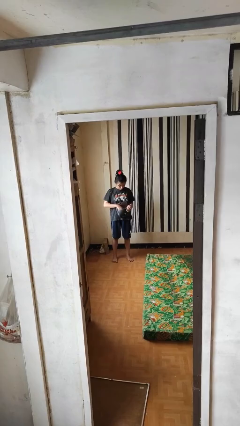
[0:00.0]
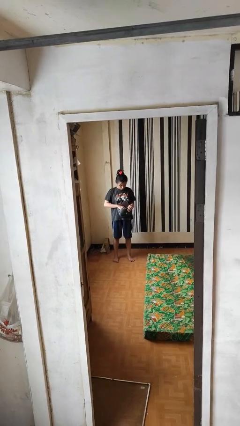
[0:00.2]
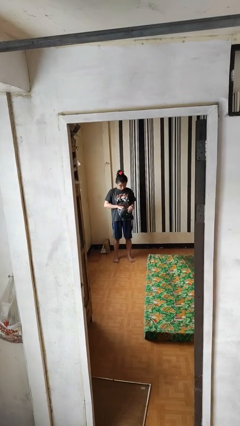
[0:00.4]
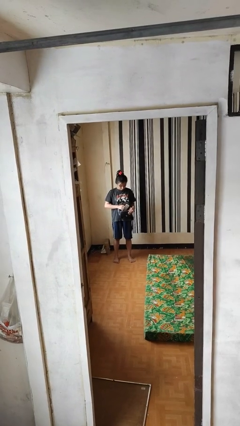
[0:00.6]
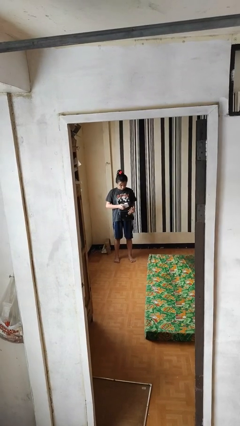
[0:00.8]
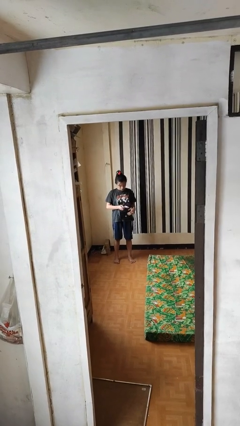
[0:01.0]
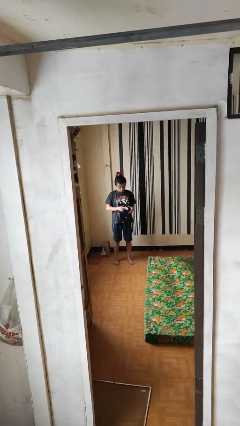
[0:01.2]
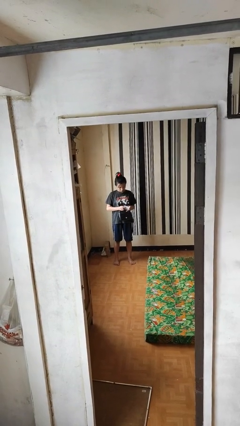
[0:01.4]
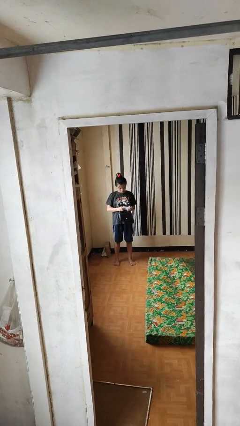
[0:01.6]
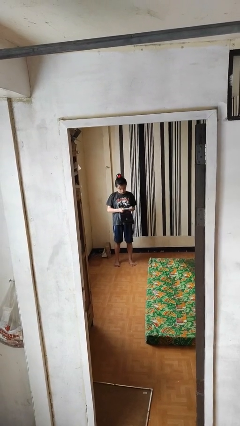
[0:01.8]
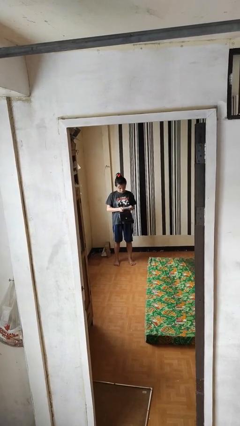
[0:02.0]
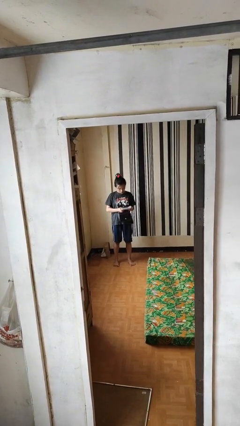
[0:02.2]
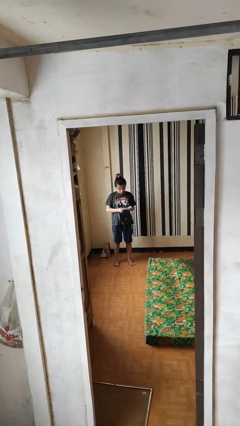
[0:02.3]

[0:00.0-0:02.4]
person takes object from purse

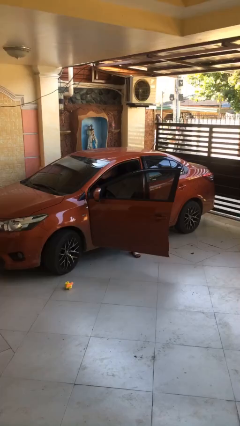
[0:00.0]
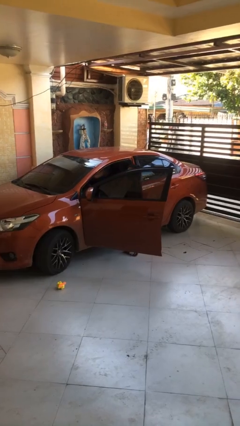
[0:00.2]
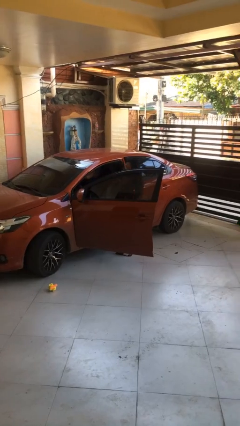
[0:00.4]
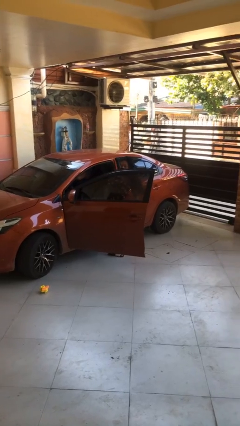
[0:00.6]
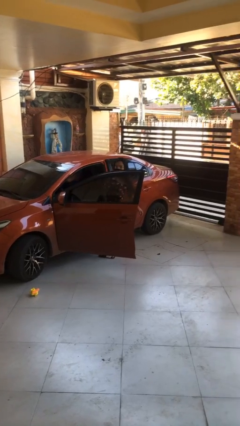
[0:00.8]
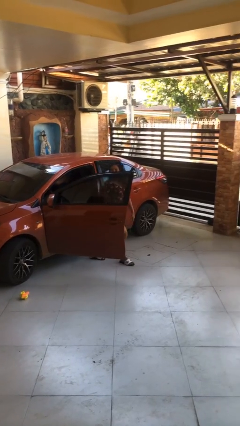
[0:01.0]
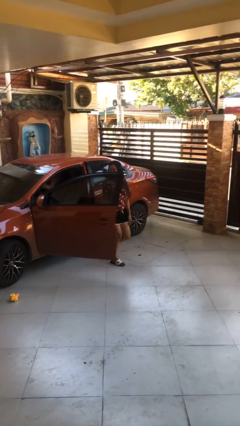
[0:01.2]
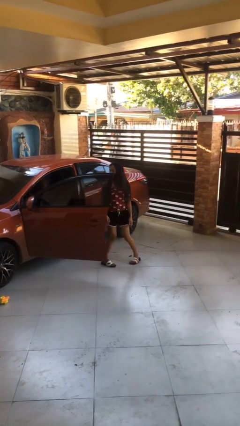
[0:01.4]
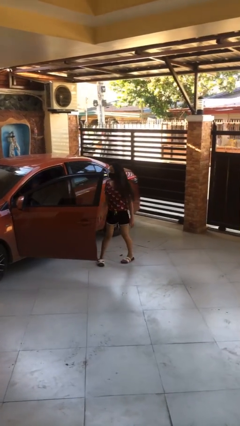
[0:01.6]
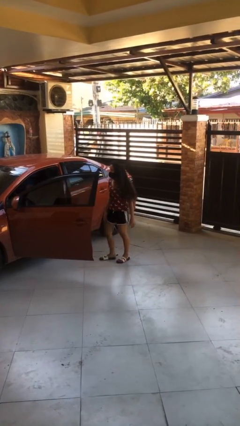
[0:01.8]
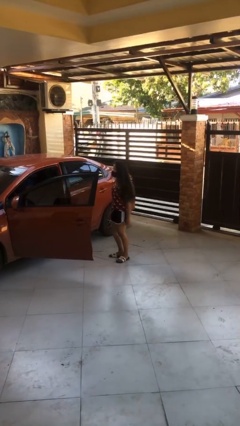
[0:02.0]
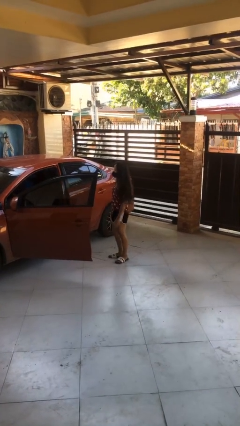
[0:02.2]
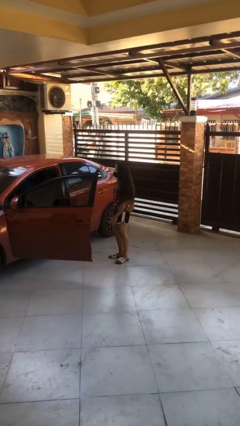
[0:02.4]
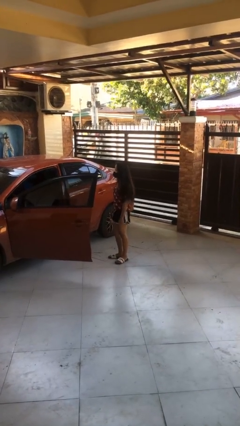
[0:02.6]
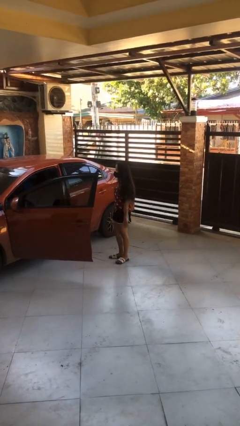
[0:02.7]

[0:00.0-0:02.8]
person exits car

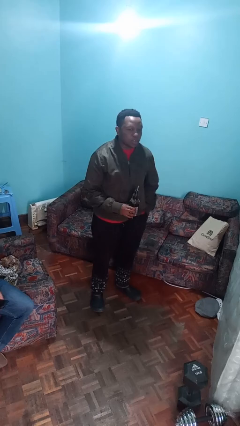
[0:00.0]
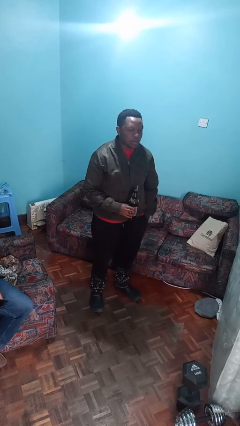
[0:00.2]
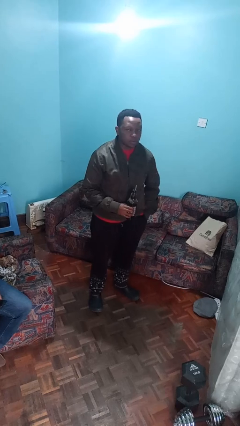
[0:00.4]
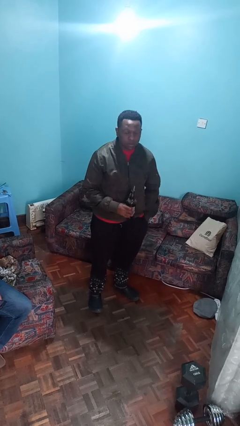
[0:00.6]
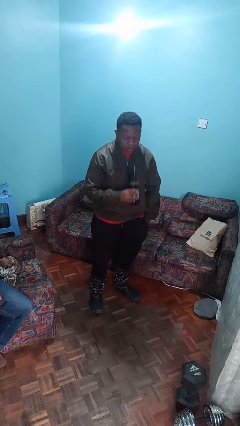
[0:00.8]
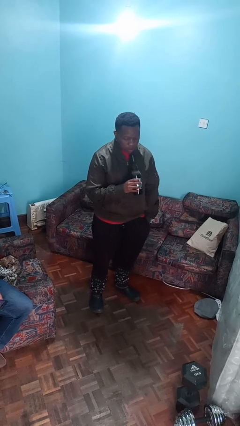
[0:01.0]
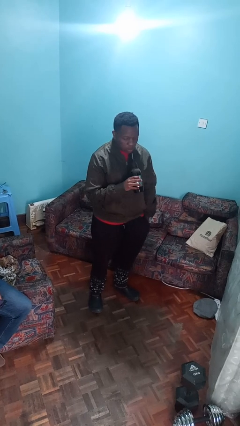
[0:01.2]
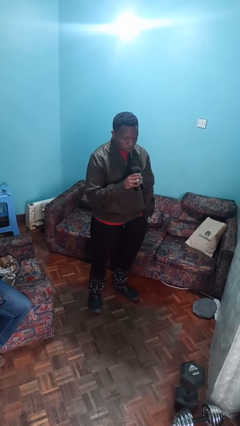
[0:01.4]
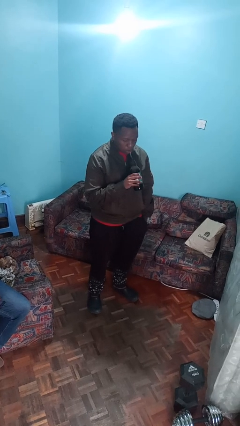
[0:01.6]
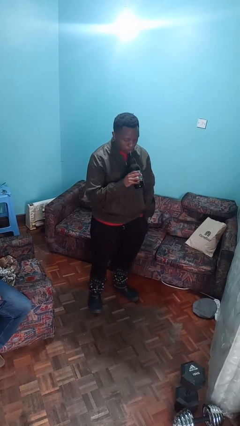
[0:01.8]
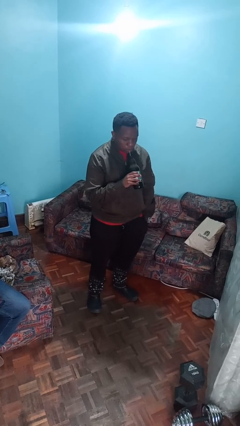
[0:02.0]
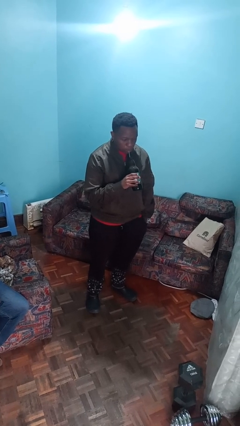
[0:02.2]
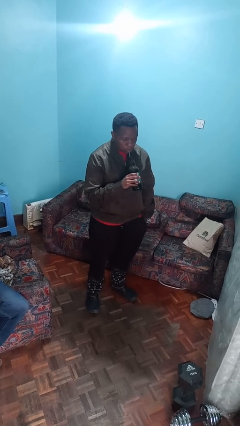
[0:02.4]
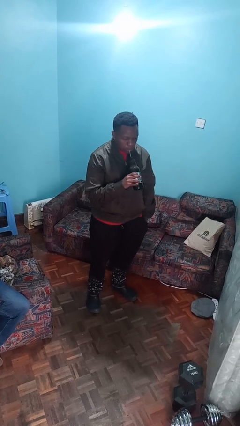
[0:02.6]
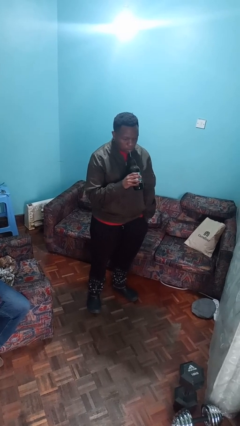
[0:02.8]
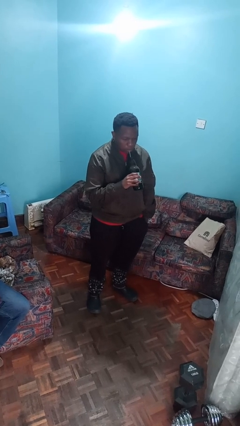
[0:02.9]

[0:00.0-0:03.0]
person drinks from straw

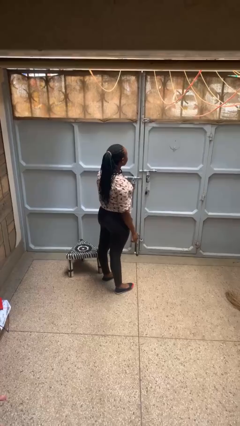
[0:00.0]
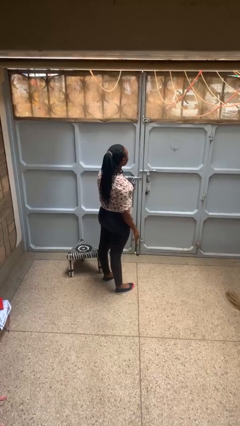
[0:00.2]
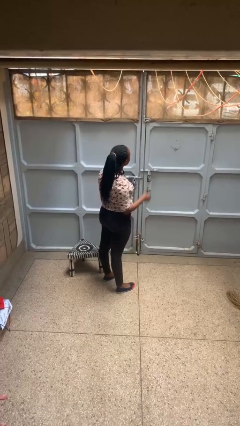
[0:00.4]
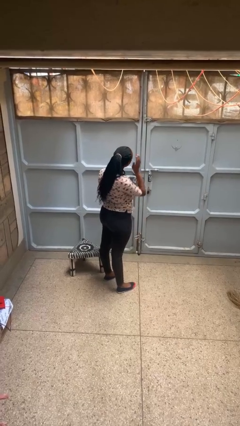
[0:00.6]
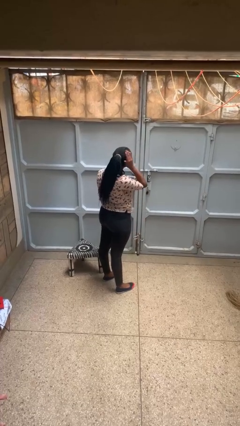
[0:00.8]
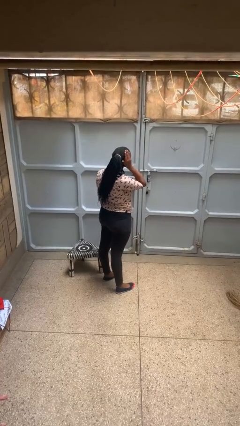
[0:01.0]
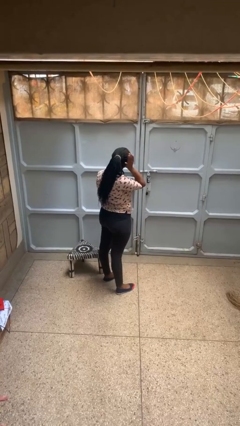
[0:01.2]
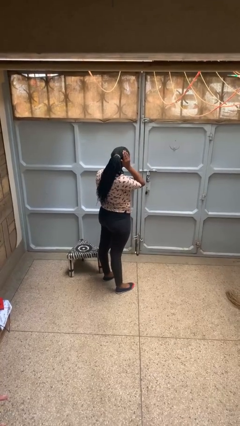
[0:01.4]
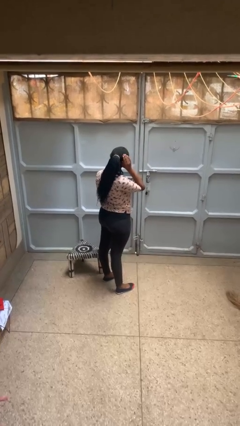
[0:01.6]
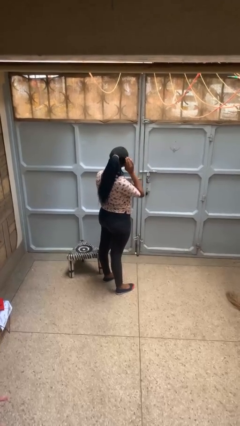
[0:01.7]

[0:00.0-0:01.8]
person pats head

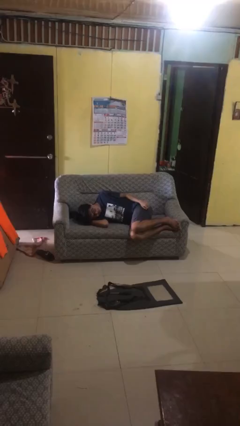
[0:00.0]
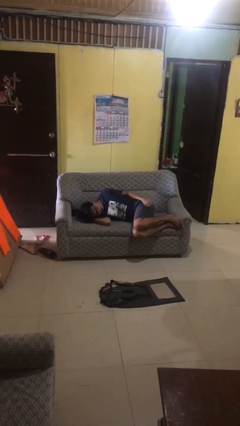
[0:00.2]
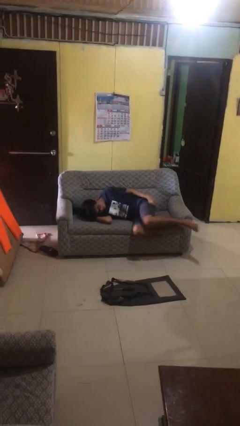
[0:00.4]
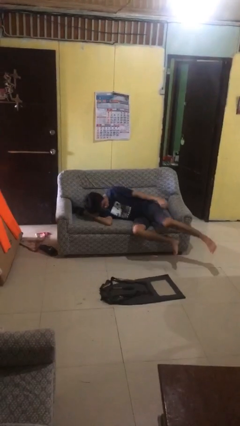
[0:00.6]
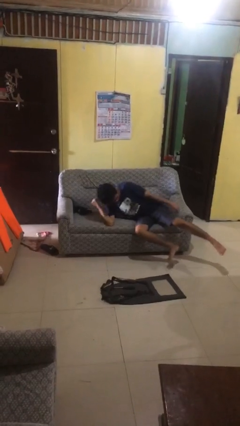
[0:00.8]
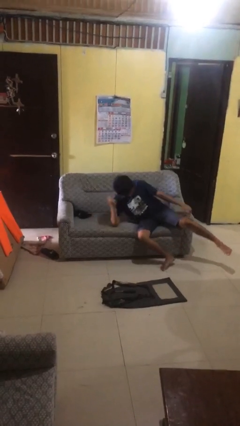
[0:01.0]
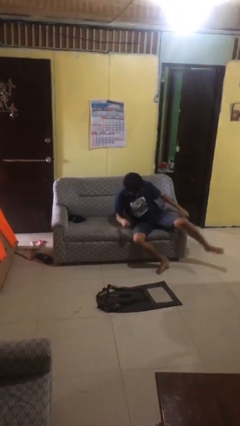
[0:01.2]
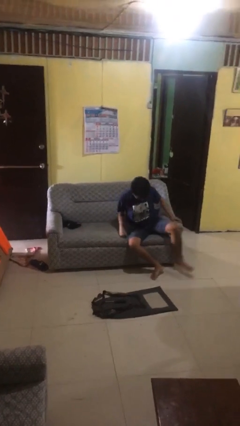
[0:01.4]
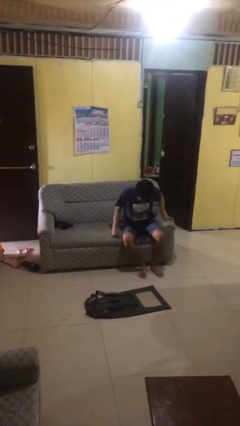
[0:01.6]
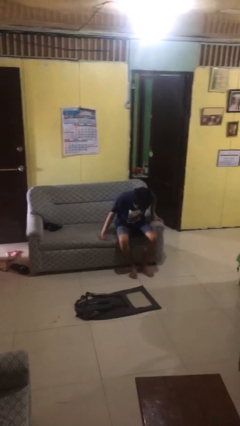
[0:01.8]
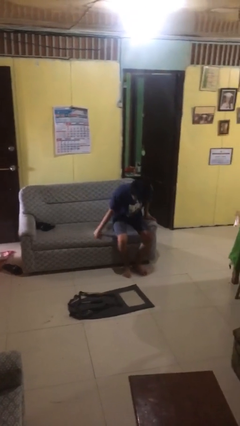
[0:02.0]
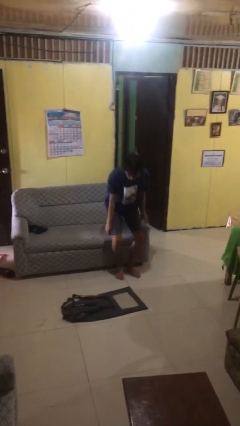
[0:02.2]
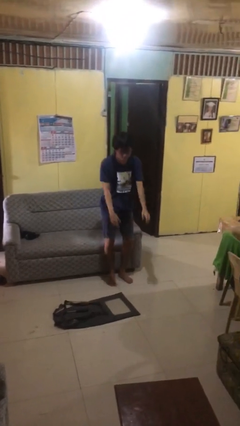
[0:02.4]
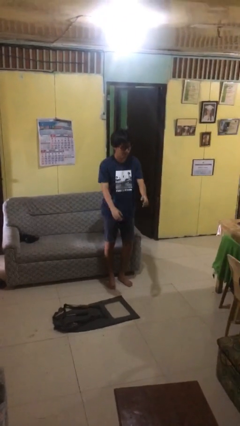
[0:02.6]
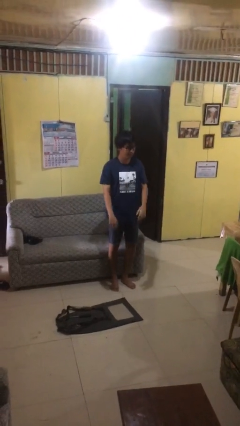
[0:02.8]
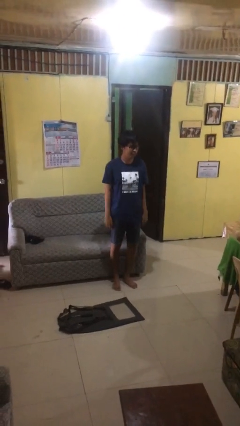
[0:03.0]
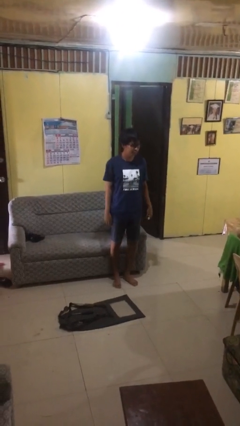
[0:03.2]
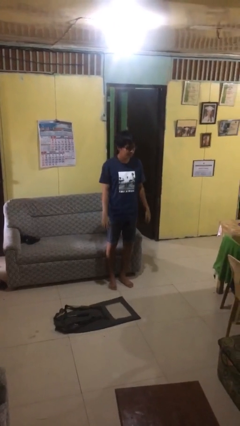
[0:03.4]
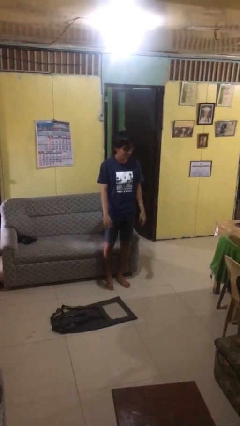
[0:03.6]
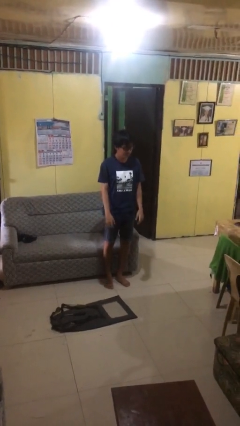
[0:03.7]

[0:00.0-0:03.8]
person stands up

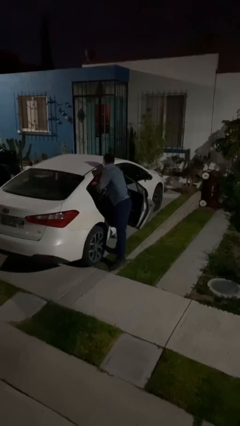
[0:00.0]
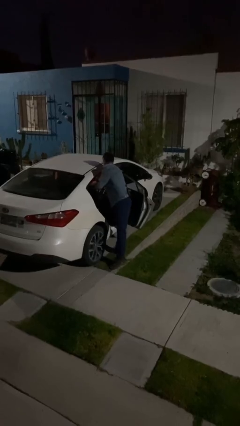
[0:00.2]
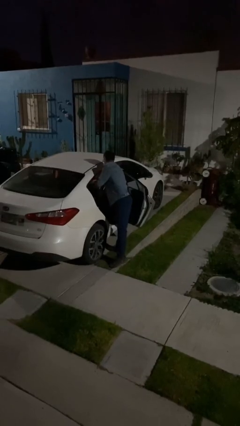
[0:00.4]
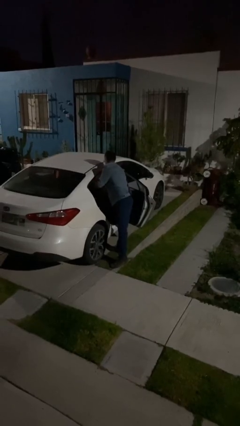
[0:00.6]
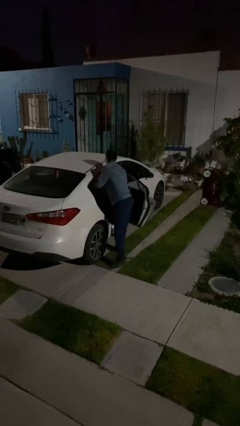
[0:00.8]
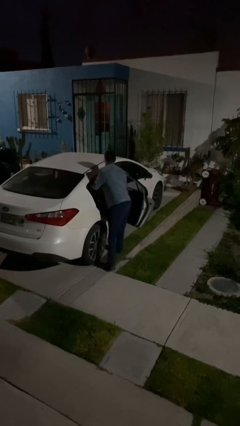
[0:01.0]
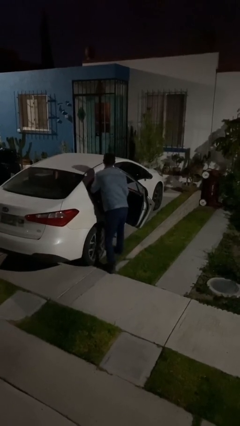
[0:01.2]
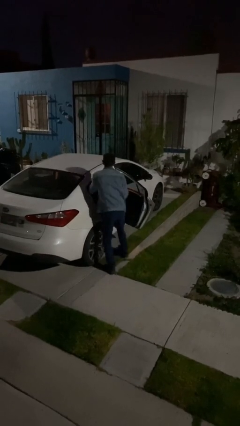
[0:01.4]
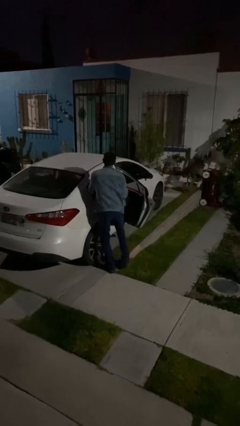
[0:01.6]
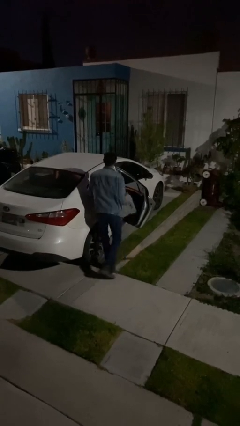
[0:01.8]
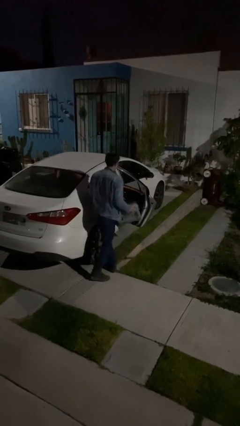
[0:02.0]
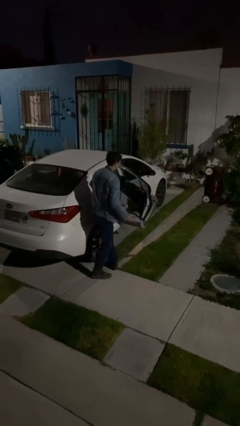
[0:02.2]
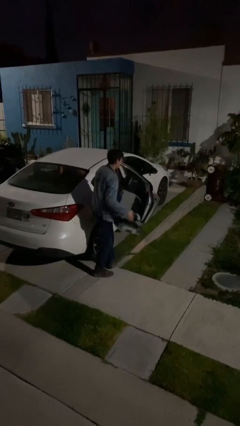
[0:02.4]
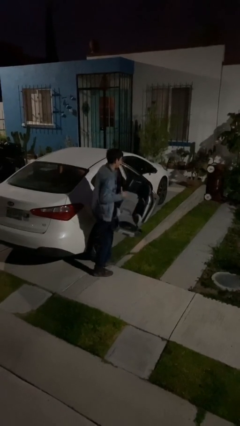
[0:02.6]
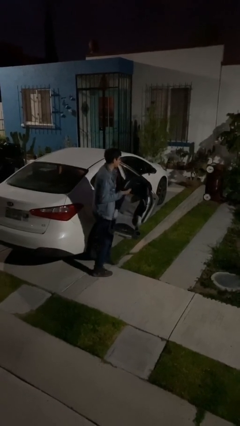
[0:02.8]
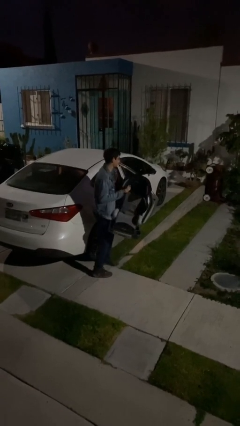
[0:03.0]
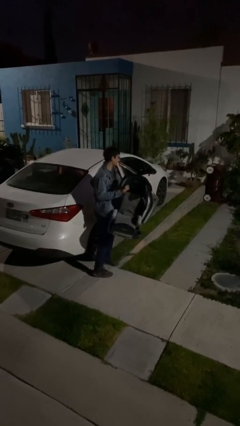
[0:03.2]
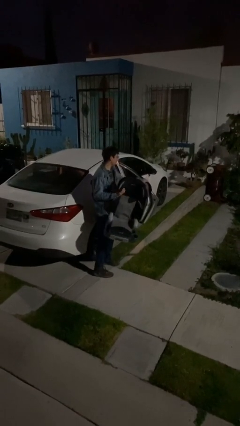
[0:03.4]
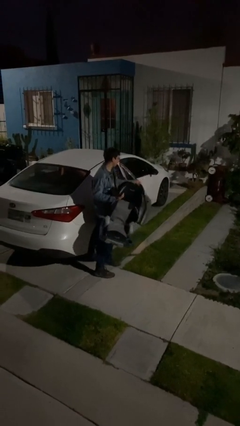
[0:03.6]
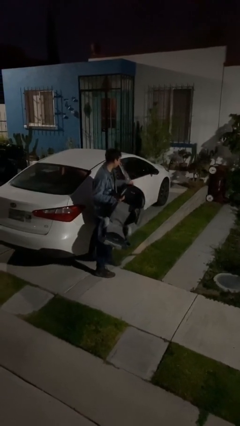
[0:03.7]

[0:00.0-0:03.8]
person unloads car

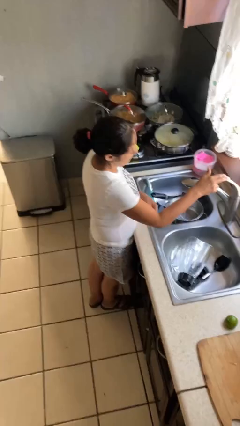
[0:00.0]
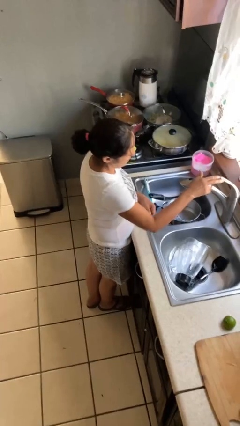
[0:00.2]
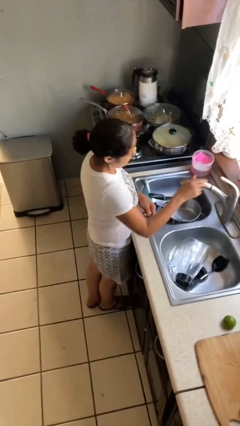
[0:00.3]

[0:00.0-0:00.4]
person turns off faucet
